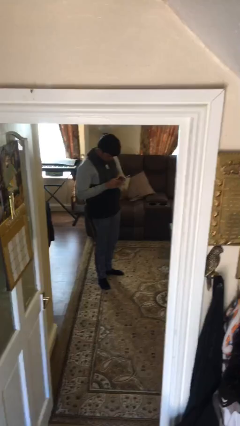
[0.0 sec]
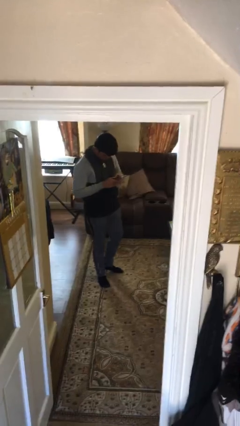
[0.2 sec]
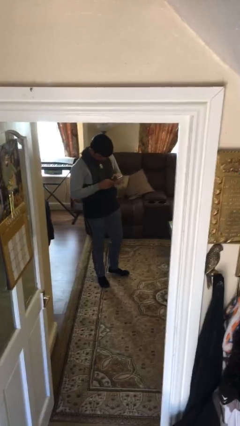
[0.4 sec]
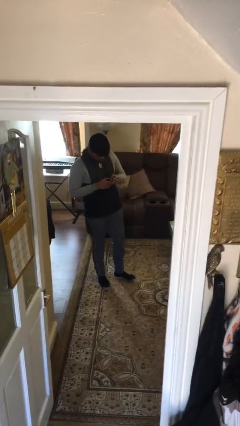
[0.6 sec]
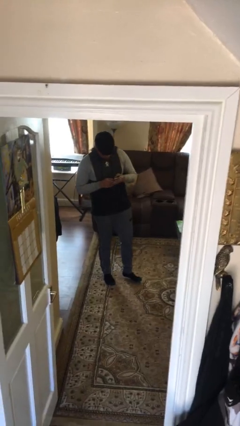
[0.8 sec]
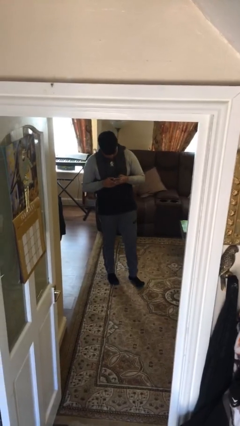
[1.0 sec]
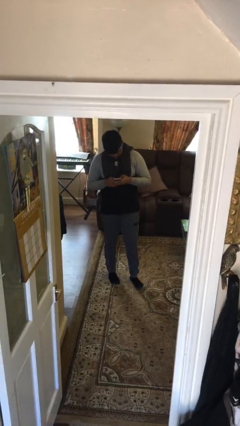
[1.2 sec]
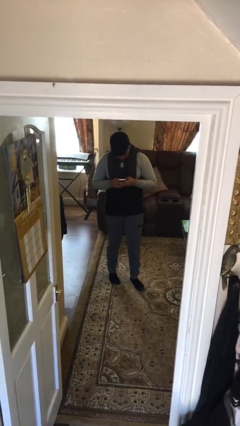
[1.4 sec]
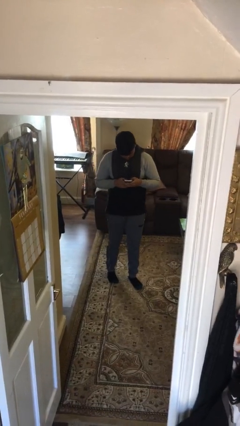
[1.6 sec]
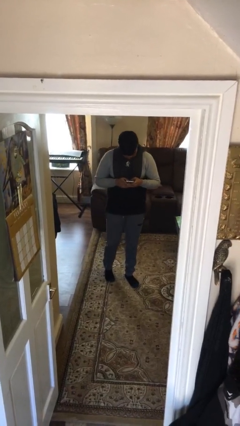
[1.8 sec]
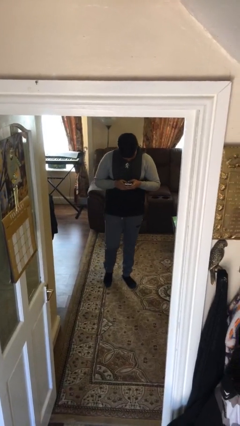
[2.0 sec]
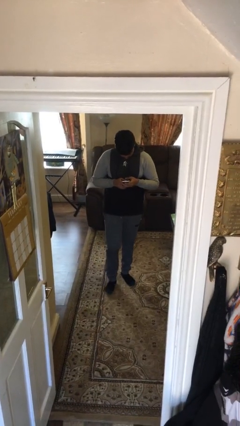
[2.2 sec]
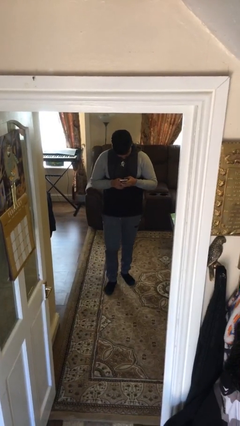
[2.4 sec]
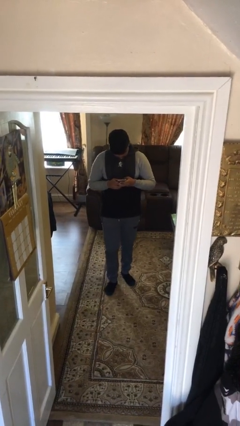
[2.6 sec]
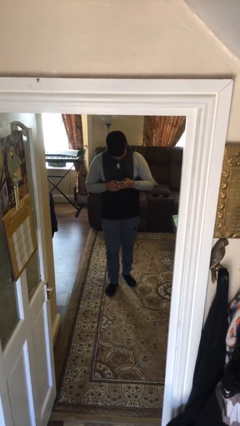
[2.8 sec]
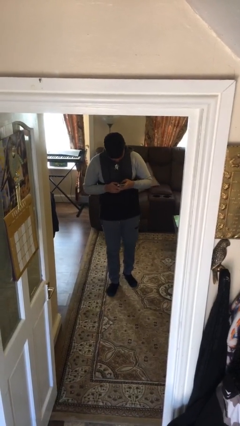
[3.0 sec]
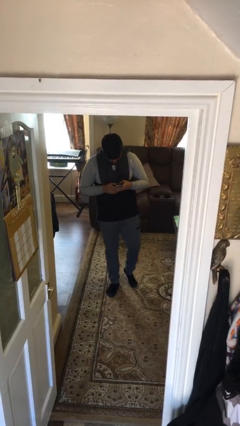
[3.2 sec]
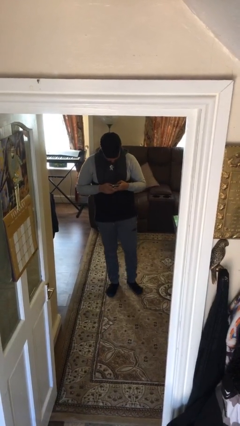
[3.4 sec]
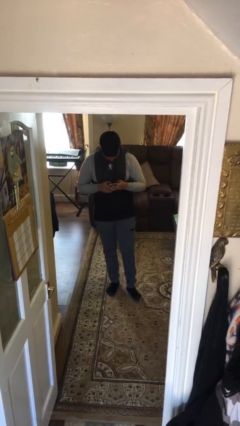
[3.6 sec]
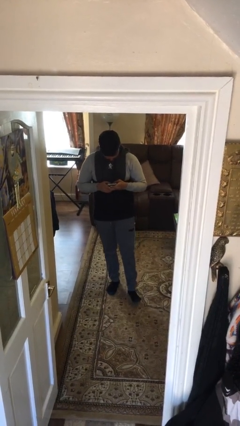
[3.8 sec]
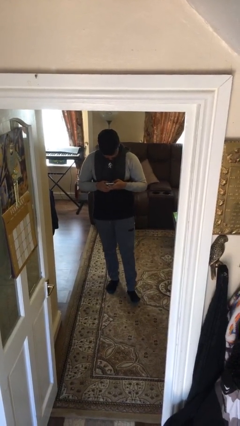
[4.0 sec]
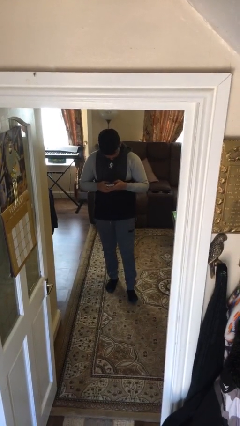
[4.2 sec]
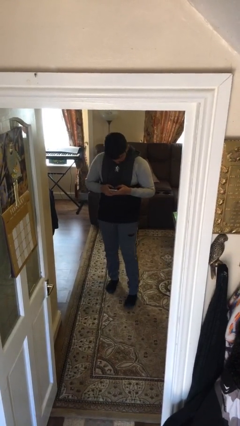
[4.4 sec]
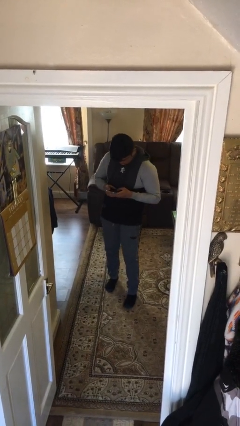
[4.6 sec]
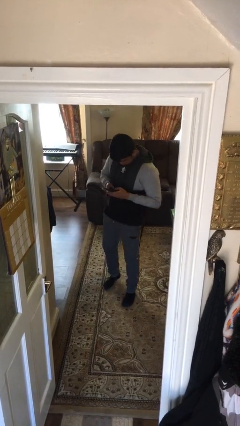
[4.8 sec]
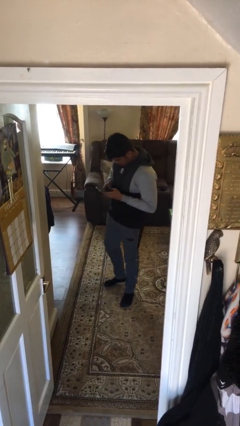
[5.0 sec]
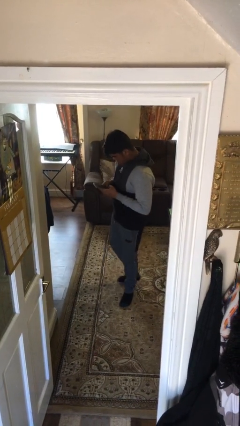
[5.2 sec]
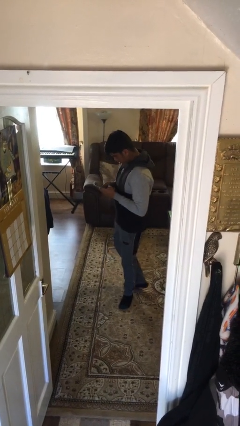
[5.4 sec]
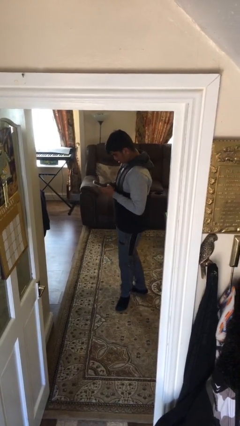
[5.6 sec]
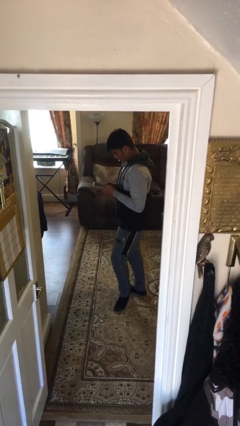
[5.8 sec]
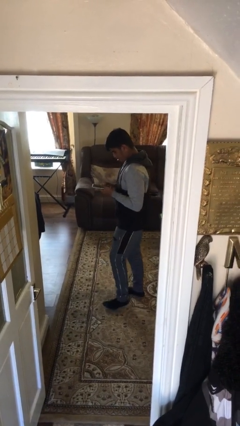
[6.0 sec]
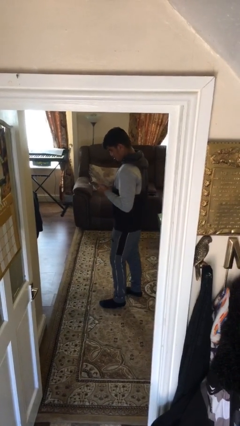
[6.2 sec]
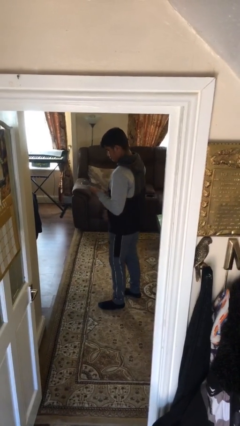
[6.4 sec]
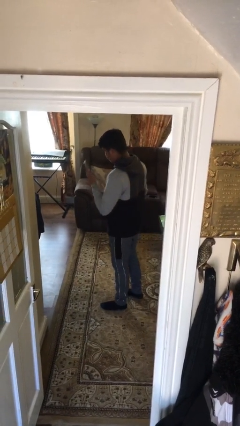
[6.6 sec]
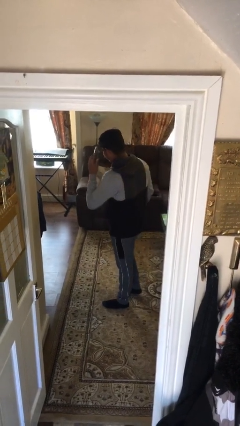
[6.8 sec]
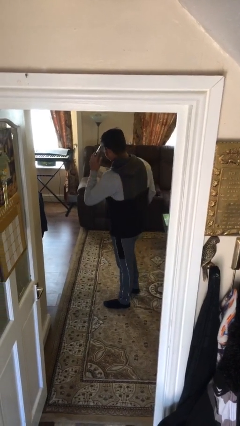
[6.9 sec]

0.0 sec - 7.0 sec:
person texts on phone

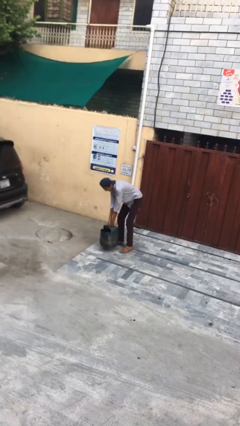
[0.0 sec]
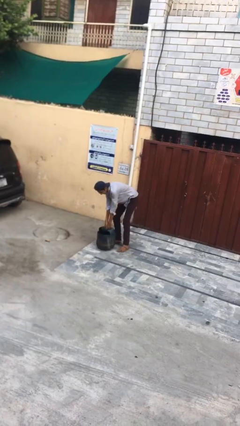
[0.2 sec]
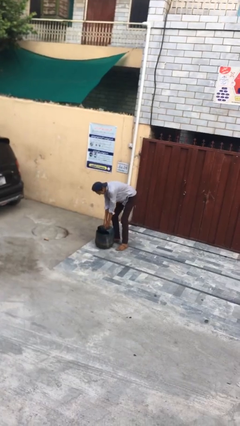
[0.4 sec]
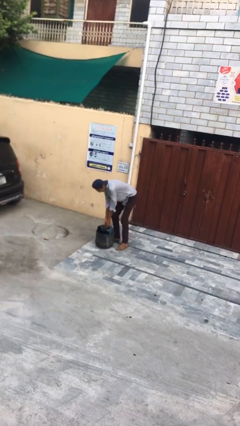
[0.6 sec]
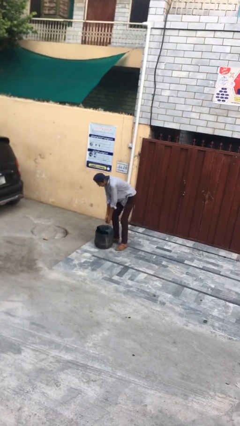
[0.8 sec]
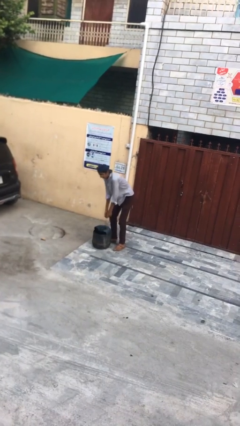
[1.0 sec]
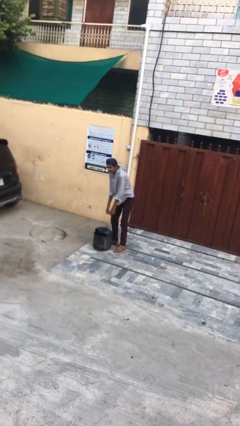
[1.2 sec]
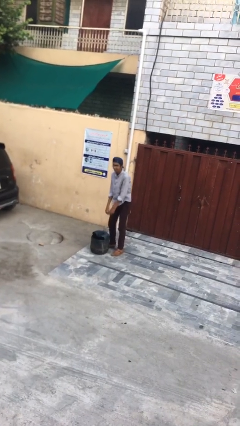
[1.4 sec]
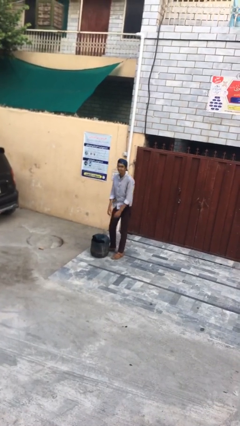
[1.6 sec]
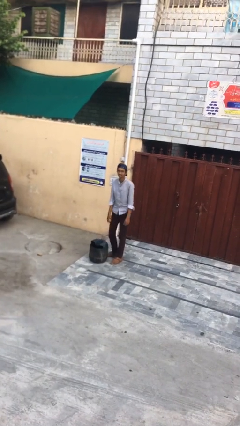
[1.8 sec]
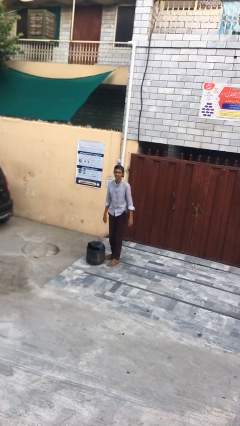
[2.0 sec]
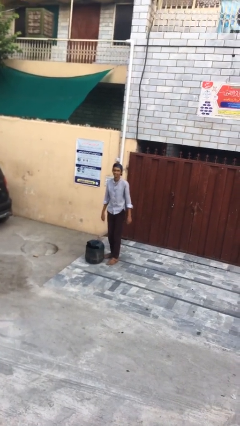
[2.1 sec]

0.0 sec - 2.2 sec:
person puts down object on floor

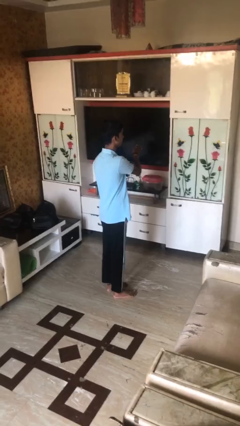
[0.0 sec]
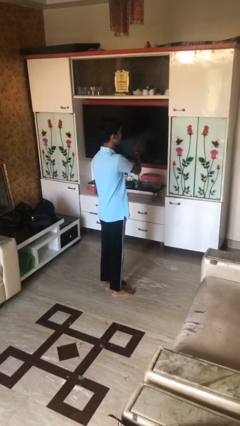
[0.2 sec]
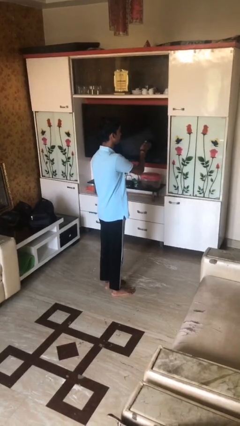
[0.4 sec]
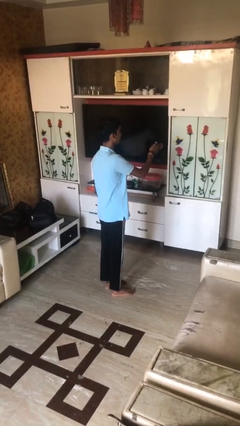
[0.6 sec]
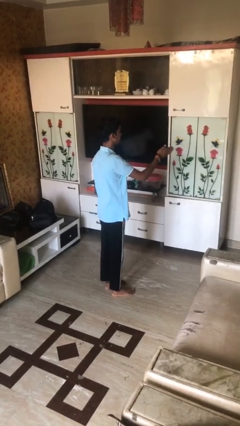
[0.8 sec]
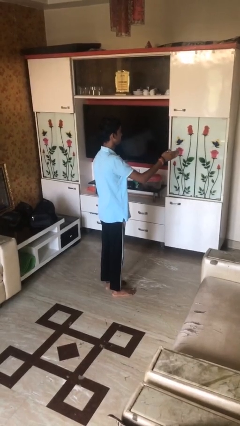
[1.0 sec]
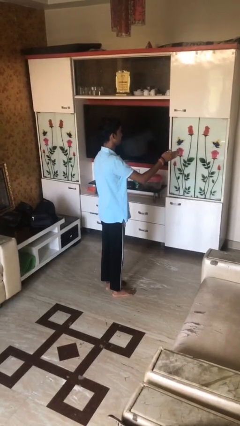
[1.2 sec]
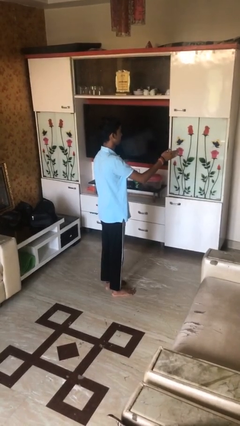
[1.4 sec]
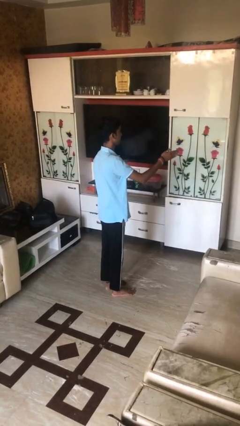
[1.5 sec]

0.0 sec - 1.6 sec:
person gestures swipe right

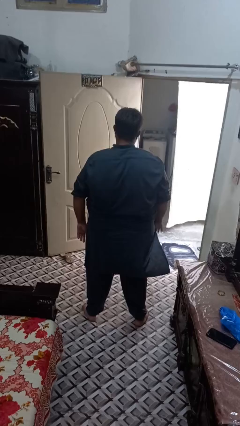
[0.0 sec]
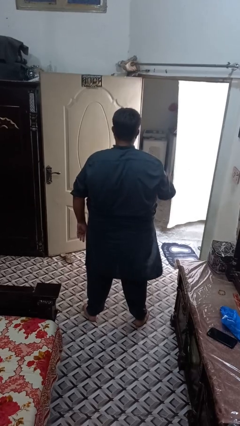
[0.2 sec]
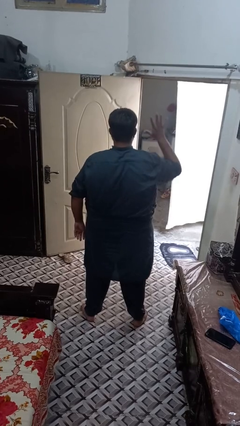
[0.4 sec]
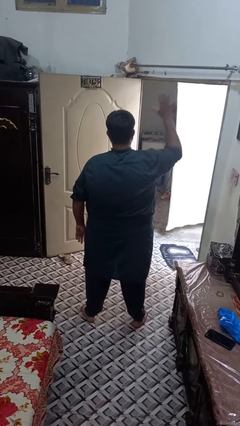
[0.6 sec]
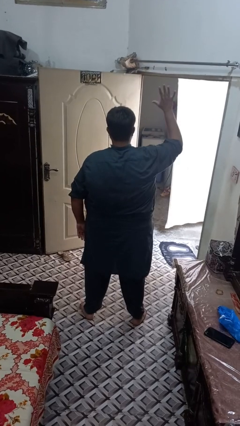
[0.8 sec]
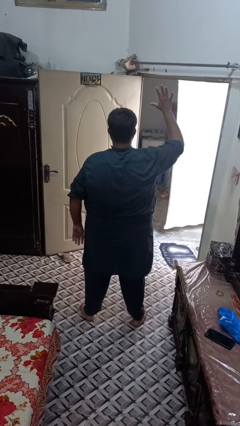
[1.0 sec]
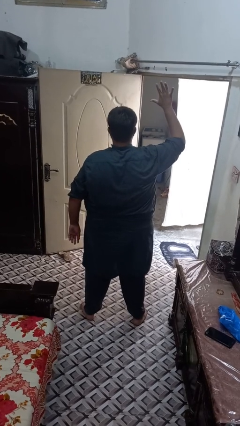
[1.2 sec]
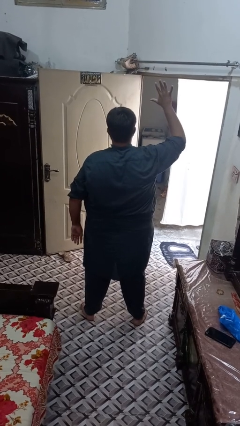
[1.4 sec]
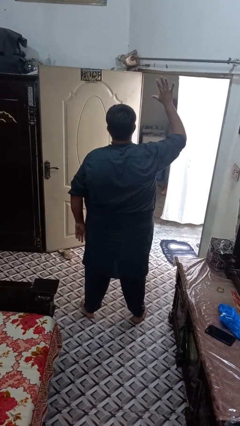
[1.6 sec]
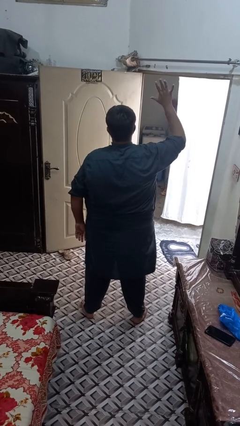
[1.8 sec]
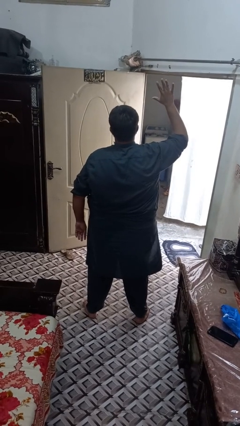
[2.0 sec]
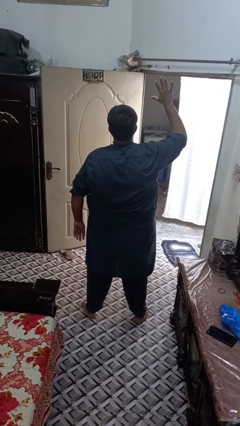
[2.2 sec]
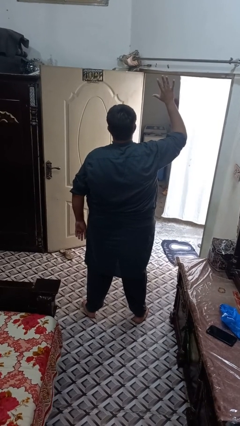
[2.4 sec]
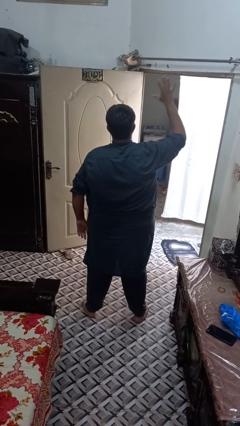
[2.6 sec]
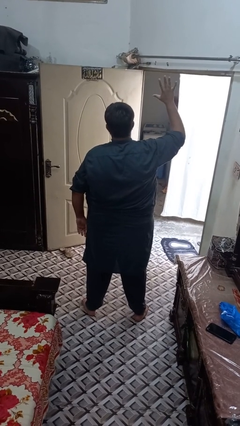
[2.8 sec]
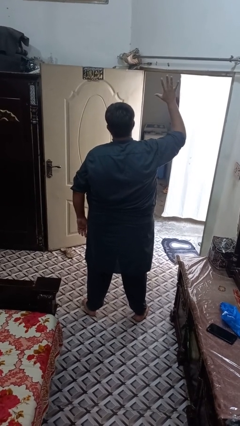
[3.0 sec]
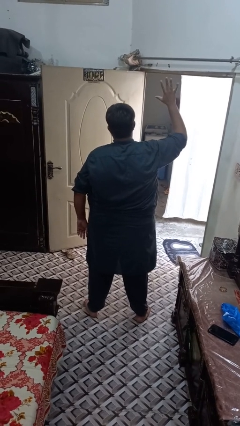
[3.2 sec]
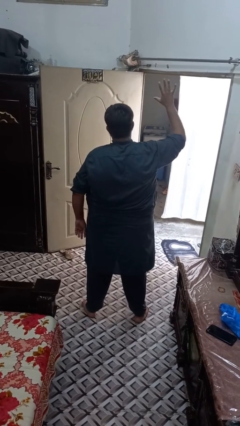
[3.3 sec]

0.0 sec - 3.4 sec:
person gestures number five

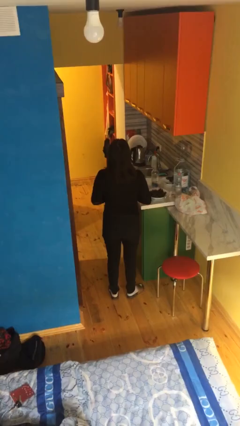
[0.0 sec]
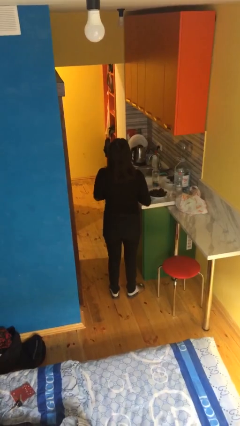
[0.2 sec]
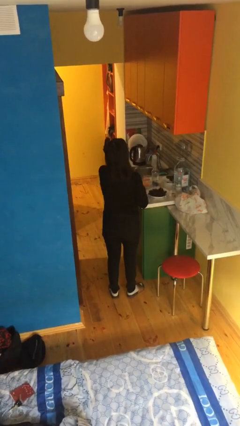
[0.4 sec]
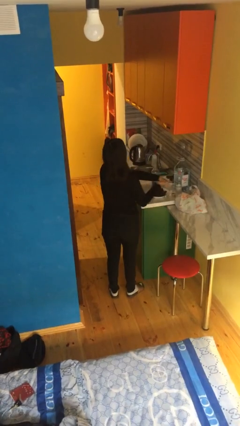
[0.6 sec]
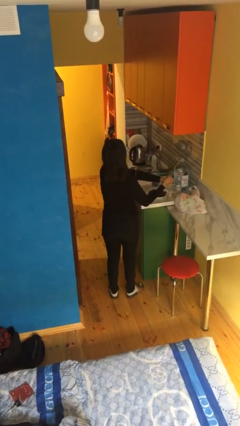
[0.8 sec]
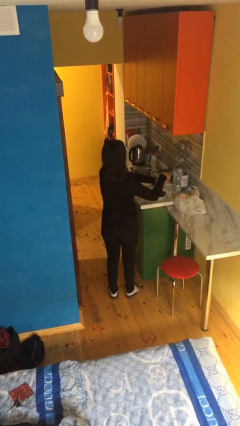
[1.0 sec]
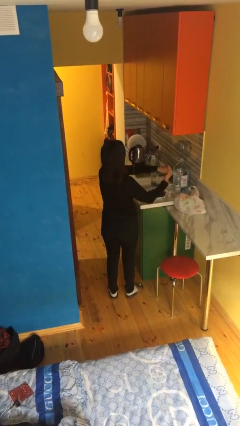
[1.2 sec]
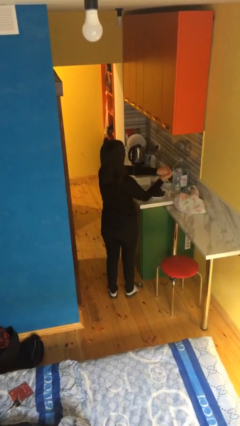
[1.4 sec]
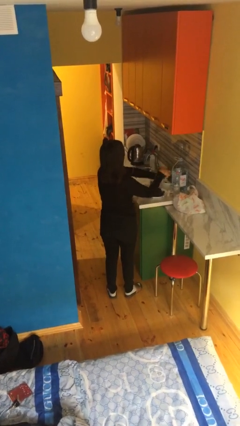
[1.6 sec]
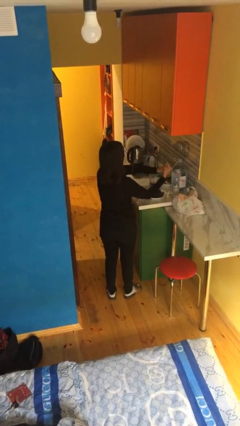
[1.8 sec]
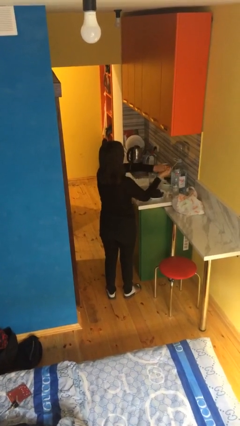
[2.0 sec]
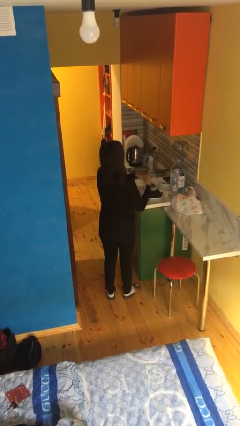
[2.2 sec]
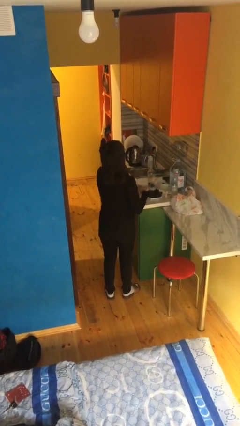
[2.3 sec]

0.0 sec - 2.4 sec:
person cracks knuckles

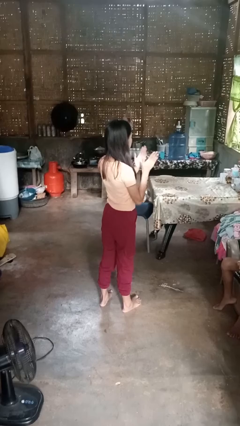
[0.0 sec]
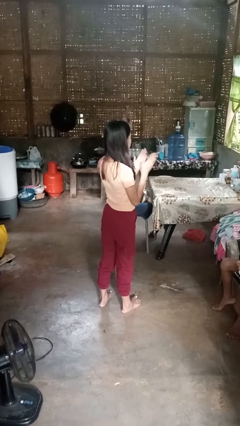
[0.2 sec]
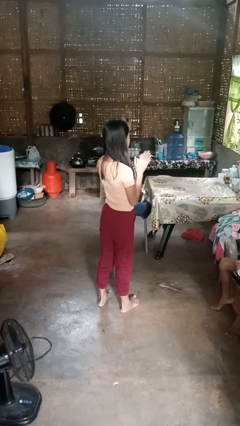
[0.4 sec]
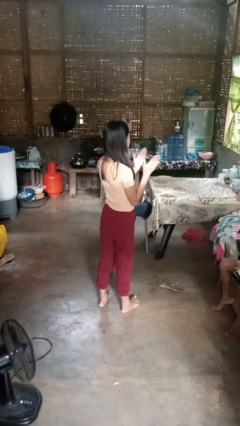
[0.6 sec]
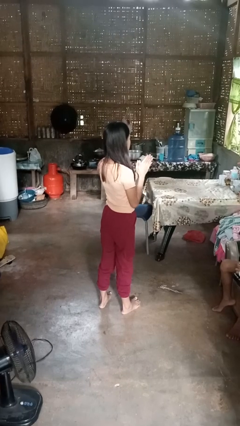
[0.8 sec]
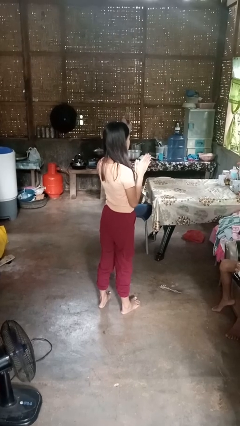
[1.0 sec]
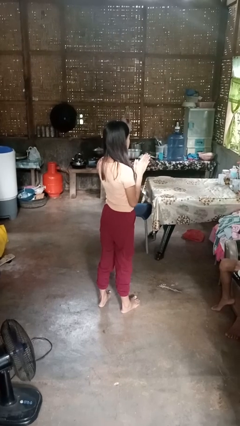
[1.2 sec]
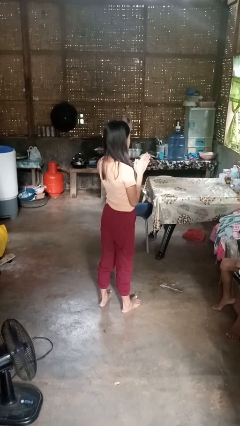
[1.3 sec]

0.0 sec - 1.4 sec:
person claps hands
